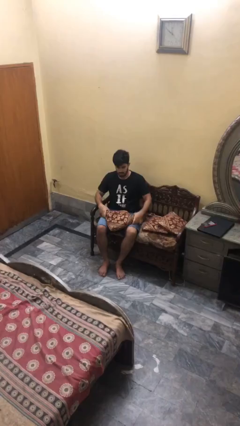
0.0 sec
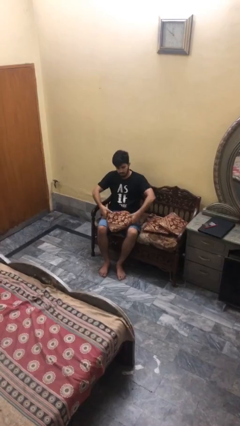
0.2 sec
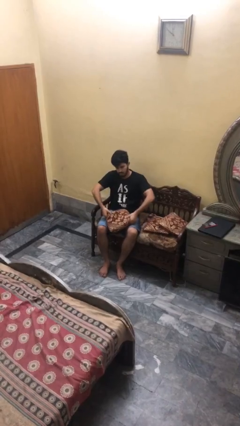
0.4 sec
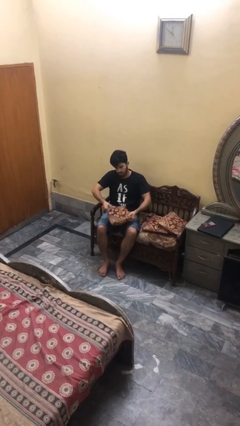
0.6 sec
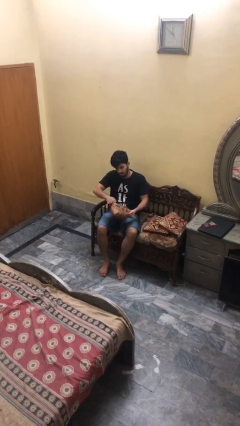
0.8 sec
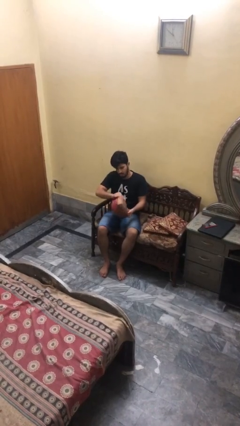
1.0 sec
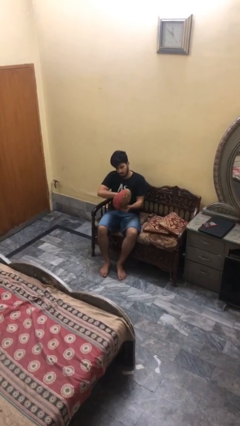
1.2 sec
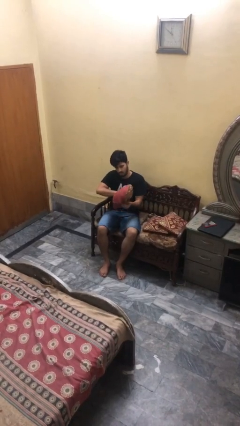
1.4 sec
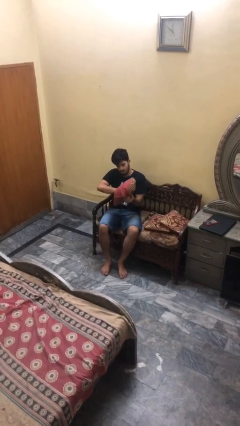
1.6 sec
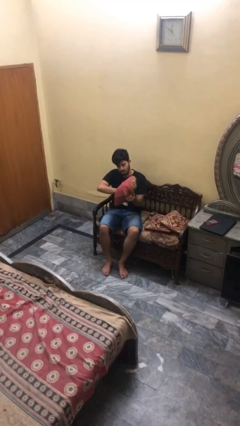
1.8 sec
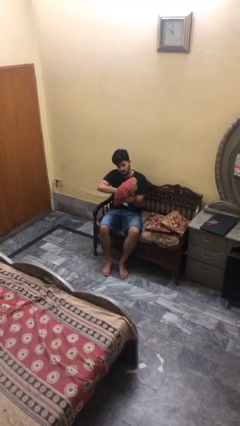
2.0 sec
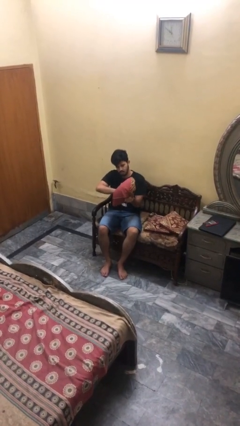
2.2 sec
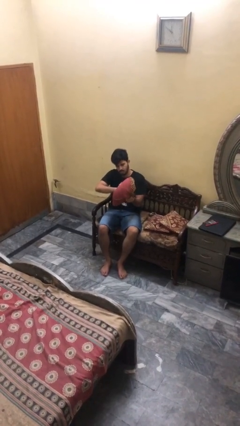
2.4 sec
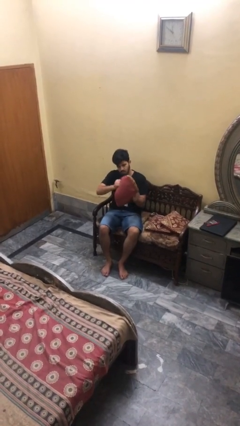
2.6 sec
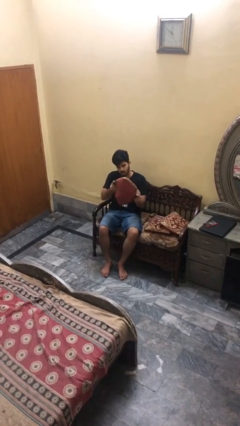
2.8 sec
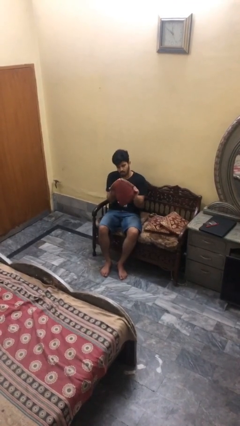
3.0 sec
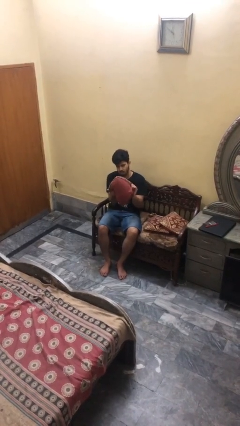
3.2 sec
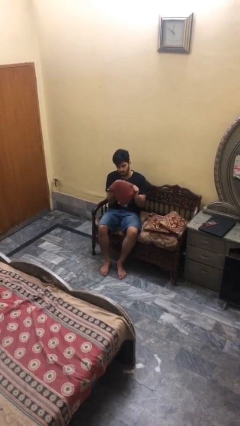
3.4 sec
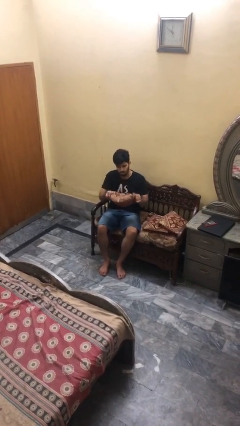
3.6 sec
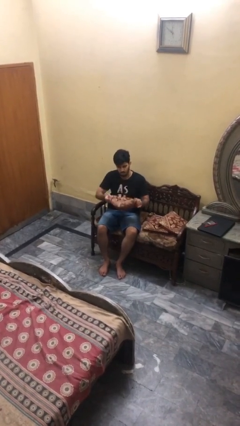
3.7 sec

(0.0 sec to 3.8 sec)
person squeezes object

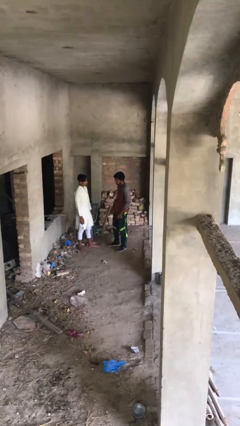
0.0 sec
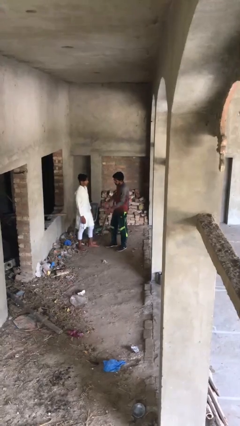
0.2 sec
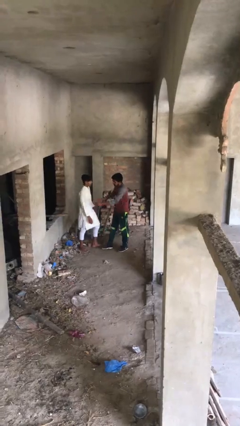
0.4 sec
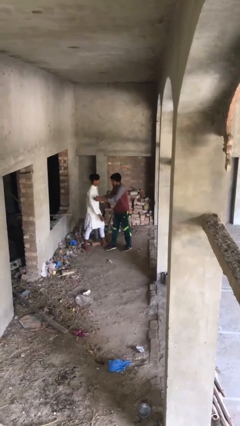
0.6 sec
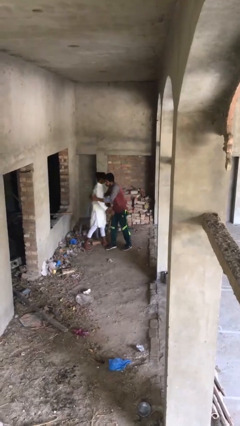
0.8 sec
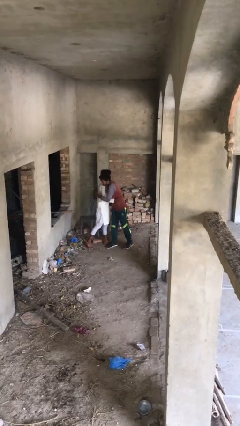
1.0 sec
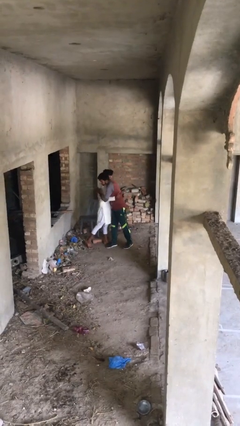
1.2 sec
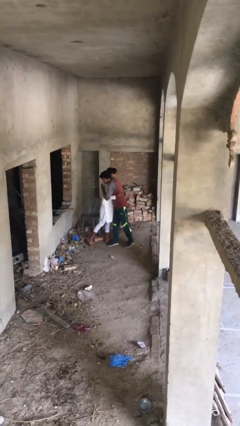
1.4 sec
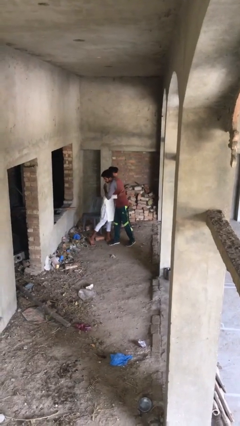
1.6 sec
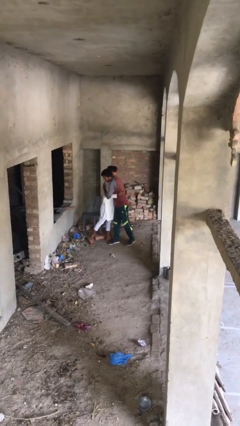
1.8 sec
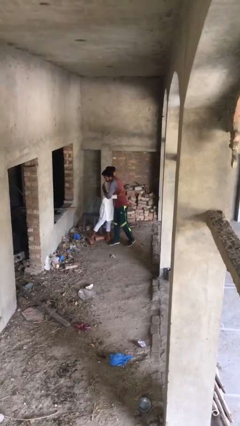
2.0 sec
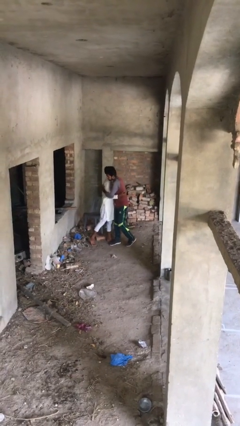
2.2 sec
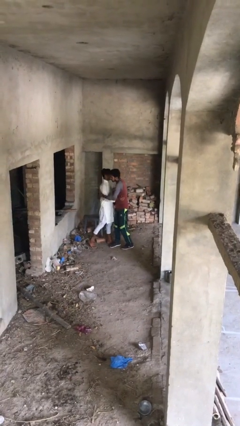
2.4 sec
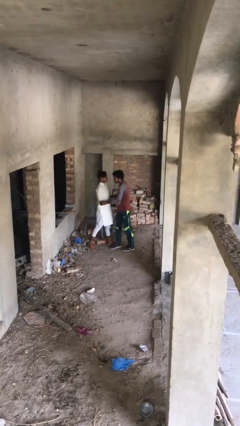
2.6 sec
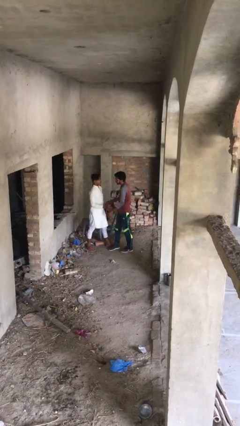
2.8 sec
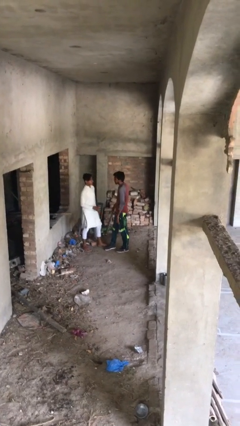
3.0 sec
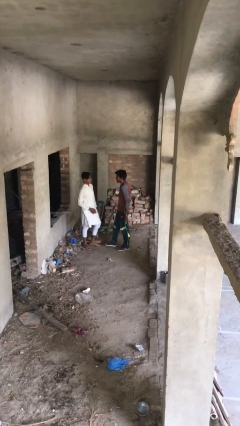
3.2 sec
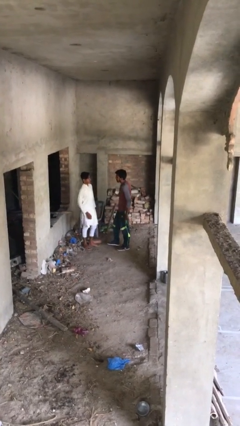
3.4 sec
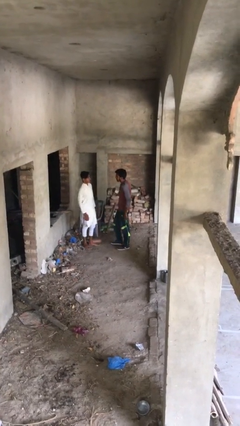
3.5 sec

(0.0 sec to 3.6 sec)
person embraces person

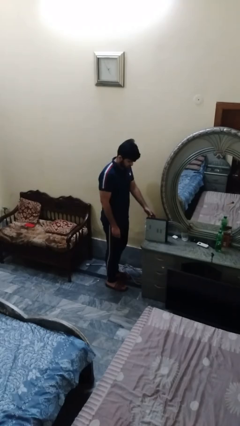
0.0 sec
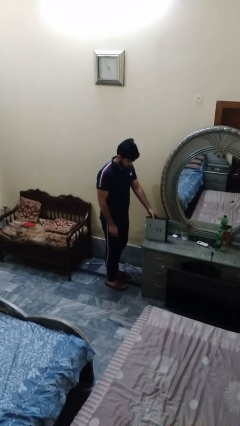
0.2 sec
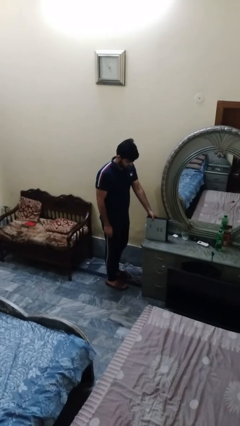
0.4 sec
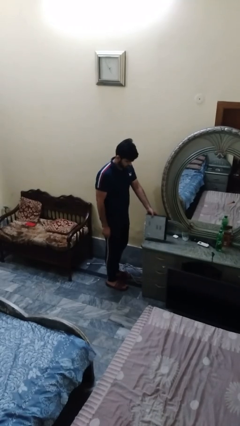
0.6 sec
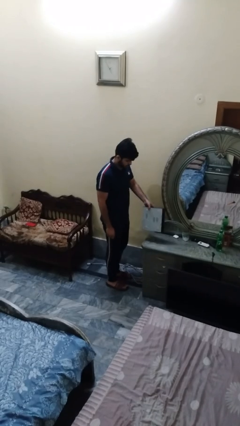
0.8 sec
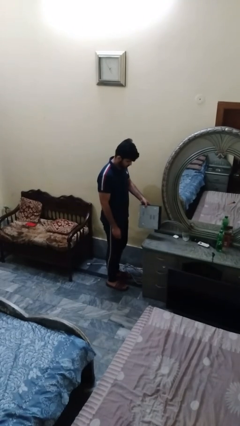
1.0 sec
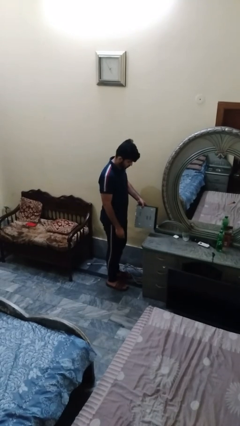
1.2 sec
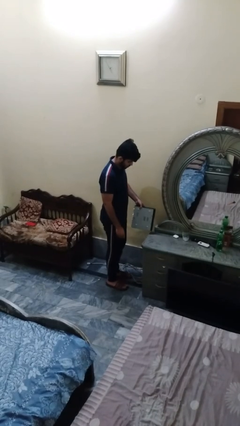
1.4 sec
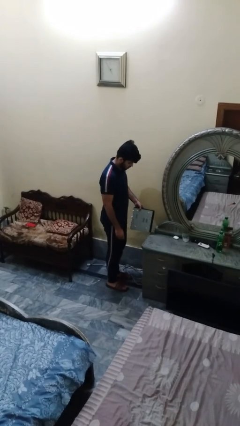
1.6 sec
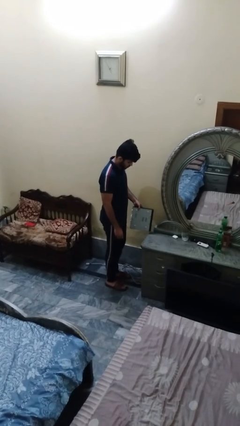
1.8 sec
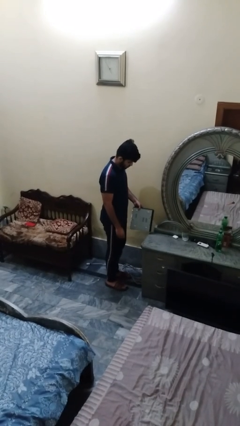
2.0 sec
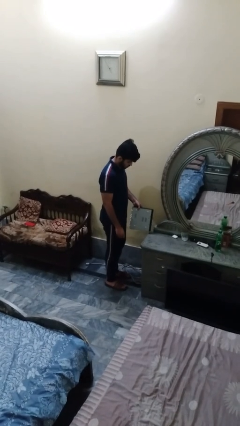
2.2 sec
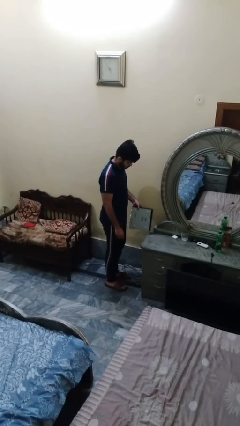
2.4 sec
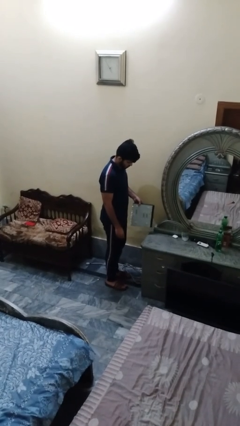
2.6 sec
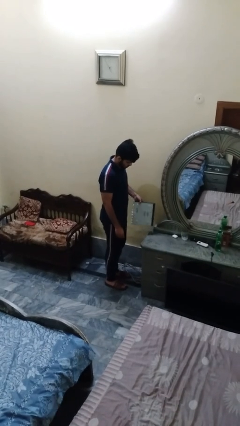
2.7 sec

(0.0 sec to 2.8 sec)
person picks up object from countertop

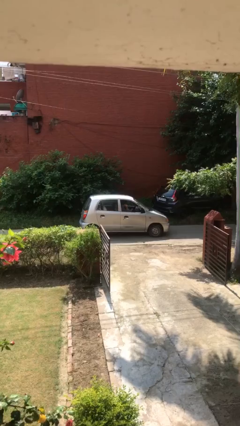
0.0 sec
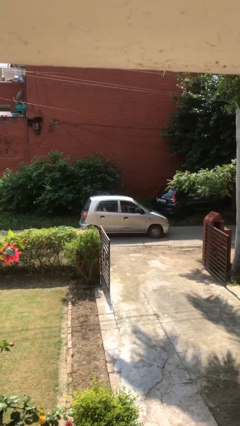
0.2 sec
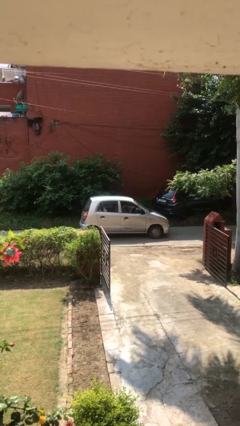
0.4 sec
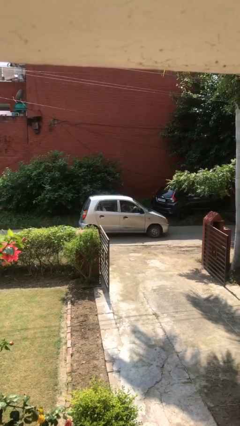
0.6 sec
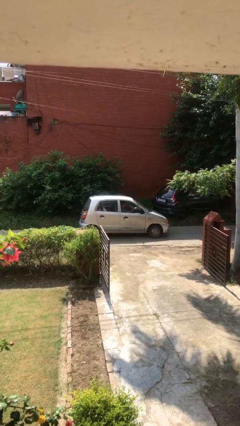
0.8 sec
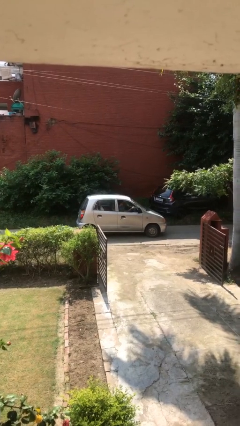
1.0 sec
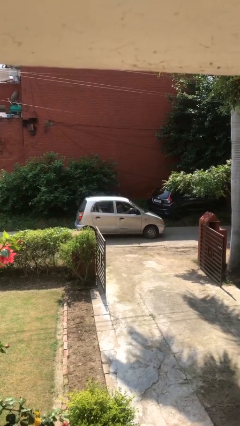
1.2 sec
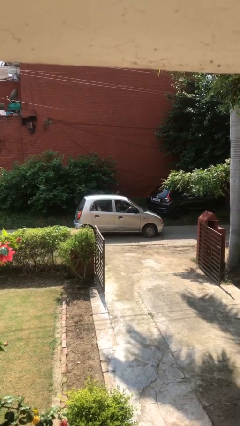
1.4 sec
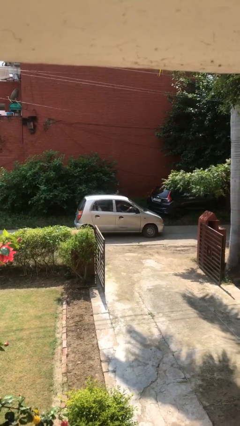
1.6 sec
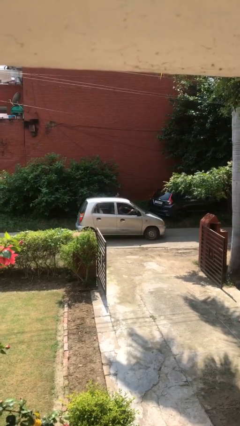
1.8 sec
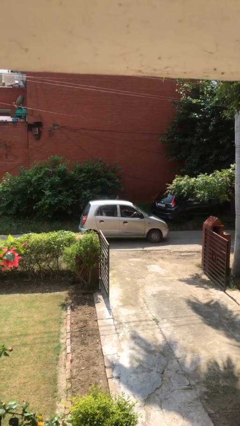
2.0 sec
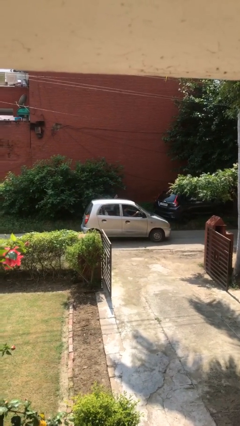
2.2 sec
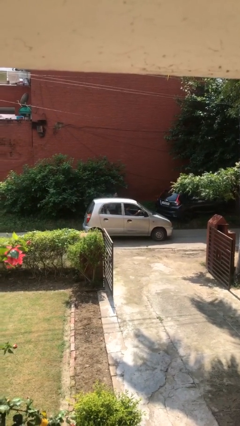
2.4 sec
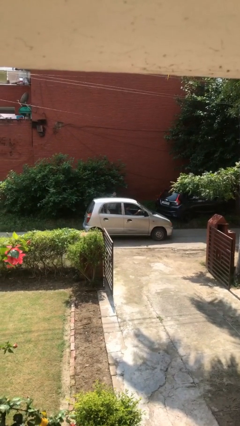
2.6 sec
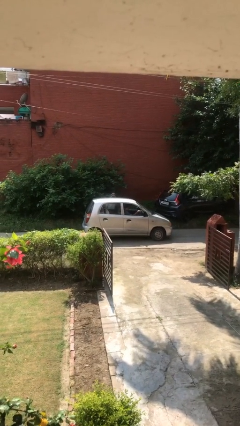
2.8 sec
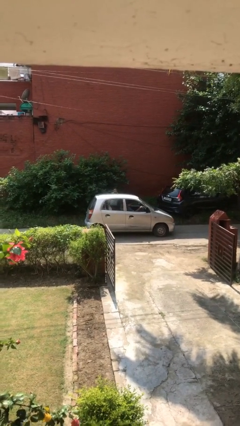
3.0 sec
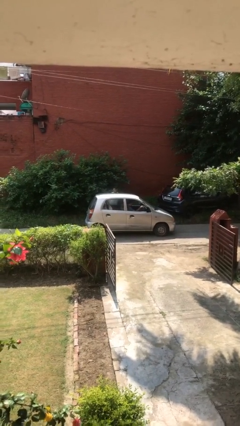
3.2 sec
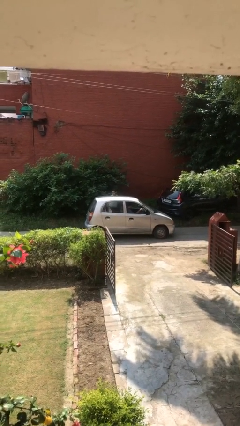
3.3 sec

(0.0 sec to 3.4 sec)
car drops off person

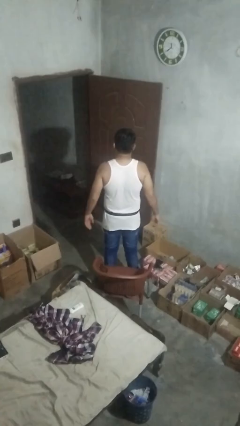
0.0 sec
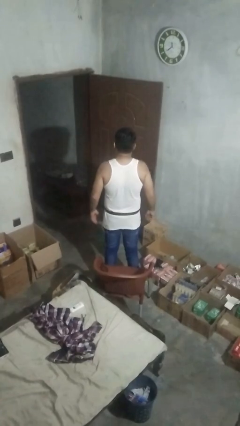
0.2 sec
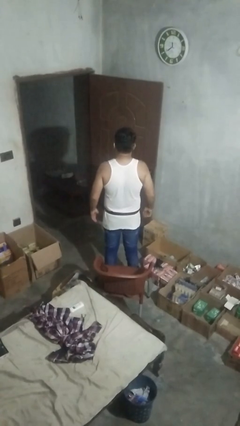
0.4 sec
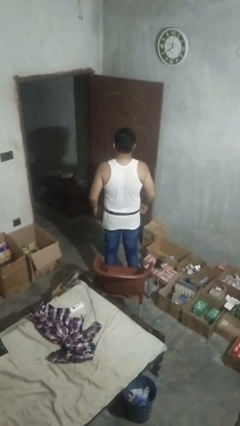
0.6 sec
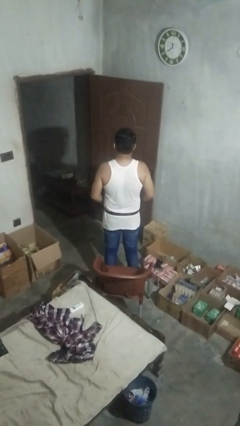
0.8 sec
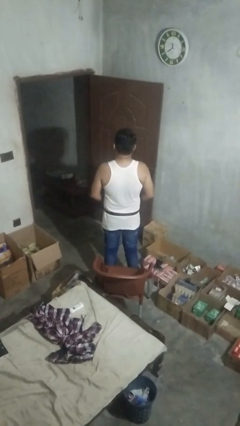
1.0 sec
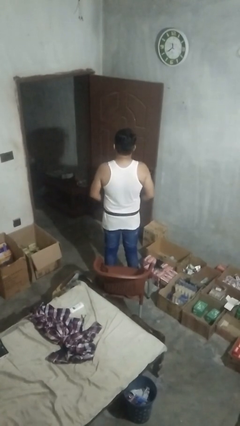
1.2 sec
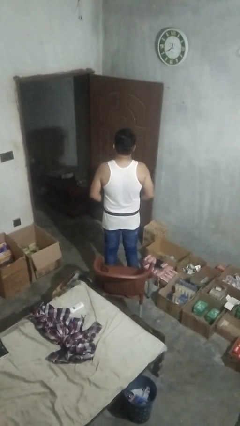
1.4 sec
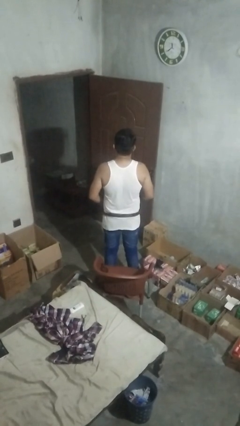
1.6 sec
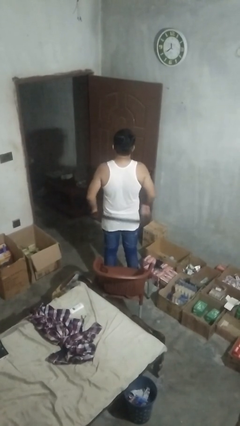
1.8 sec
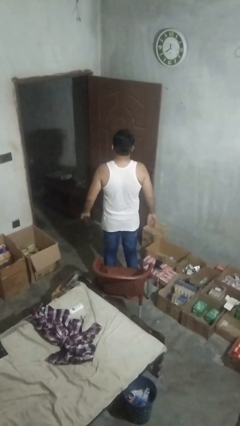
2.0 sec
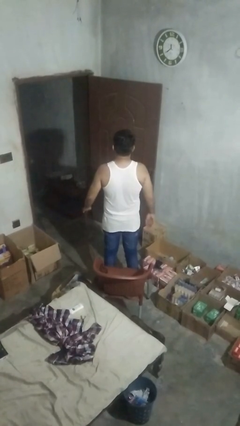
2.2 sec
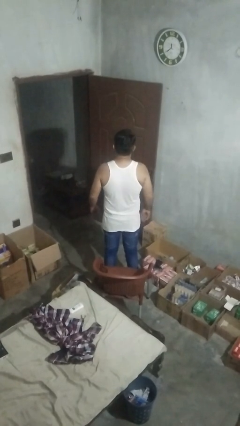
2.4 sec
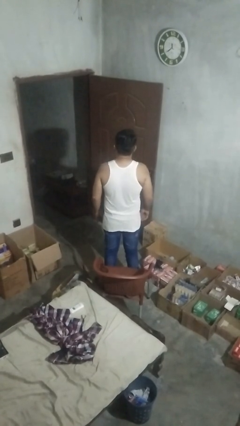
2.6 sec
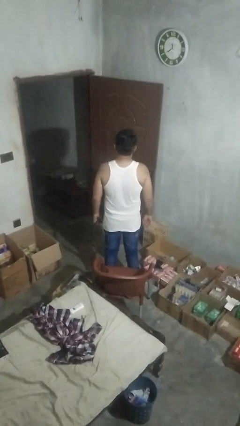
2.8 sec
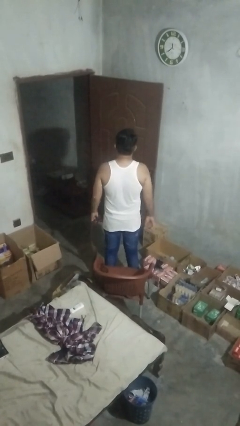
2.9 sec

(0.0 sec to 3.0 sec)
person takes off belt

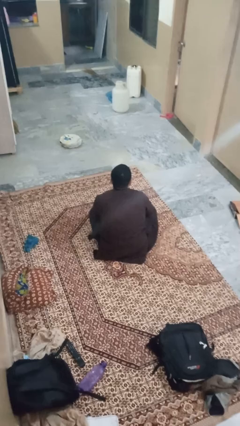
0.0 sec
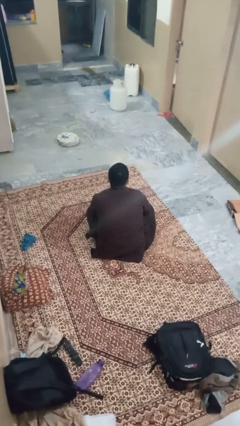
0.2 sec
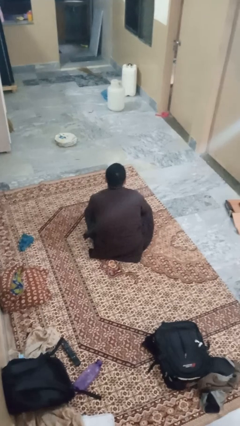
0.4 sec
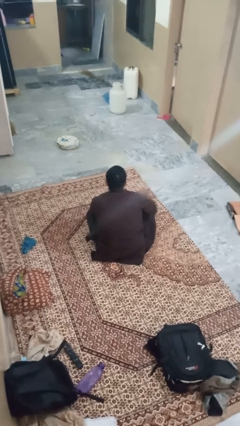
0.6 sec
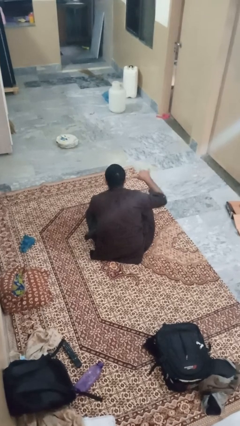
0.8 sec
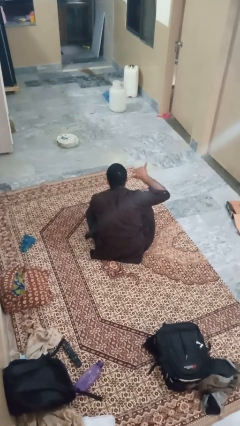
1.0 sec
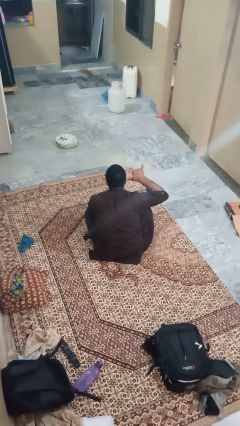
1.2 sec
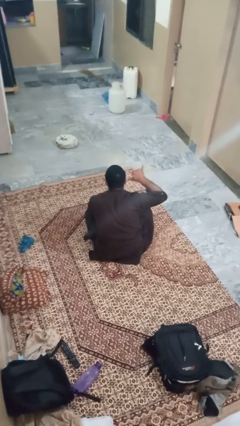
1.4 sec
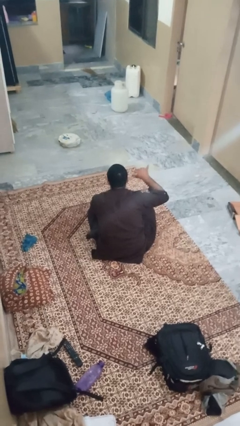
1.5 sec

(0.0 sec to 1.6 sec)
person gestures call me
